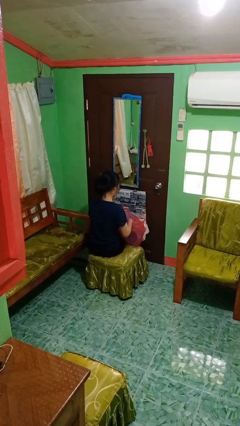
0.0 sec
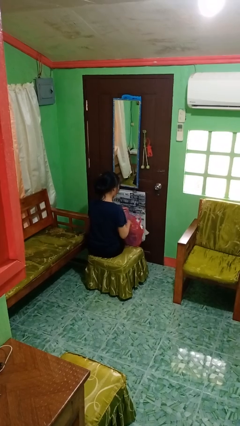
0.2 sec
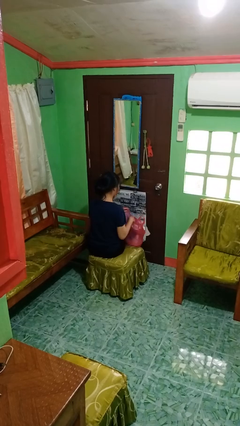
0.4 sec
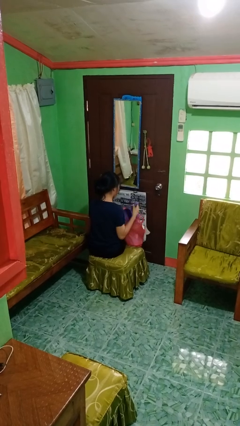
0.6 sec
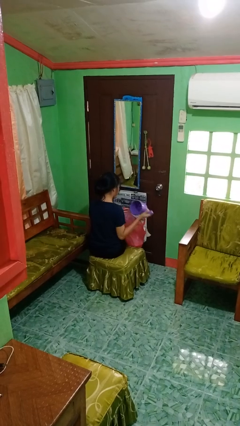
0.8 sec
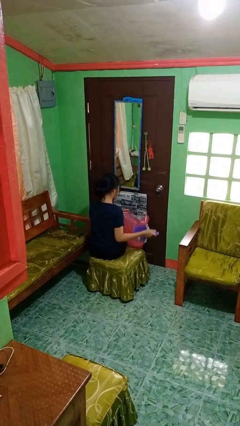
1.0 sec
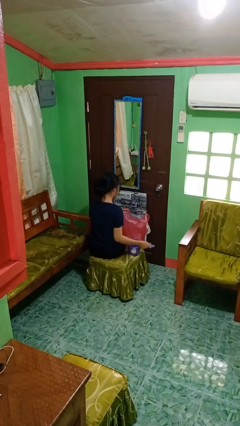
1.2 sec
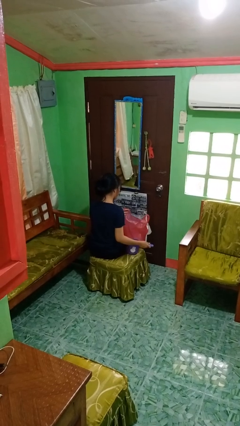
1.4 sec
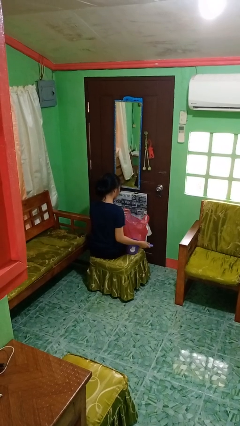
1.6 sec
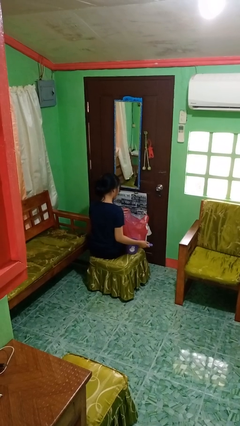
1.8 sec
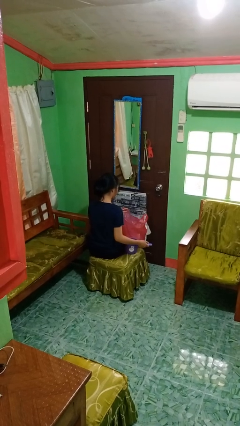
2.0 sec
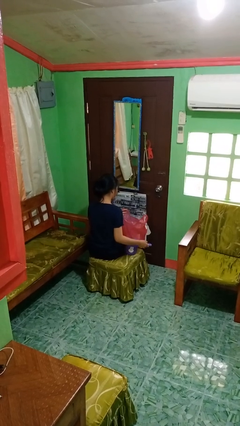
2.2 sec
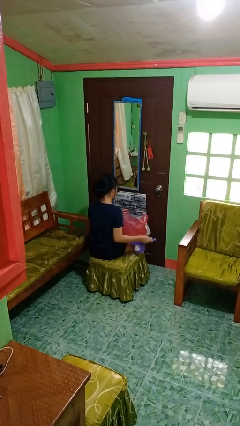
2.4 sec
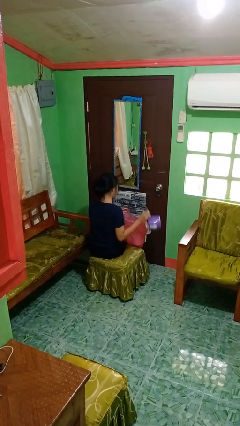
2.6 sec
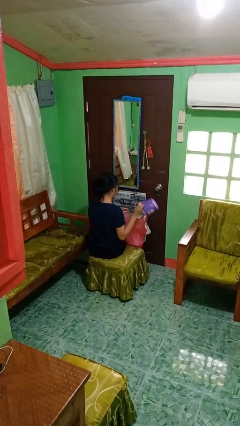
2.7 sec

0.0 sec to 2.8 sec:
person takes object from bag

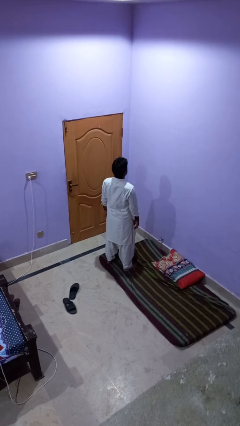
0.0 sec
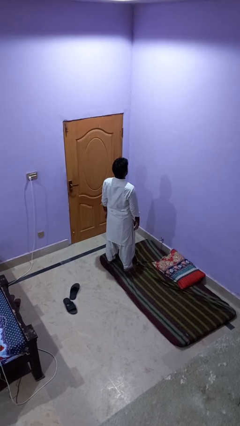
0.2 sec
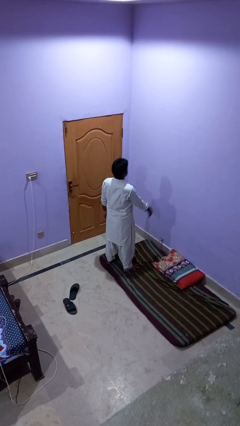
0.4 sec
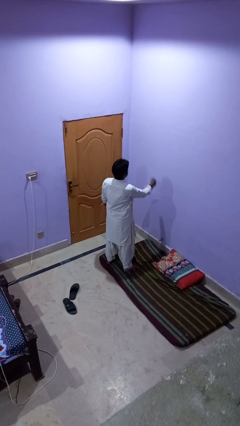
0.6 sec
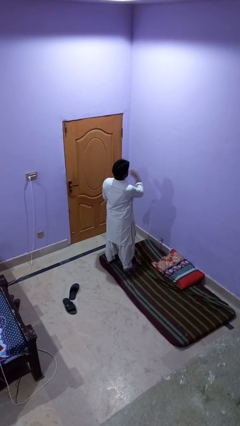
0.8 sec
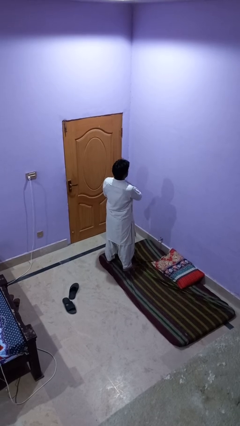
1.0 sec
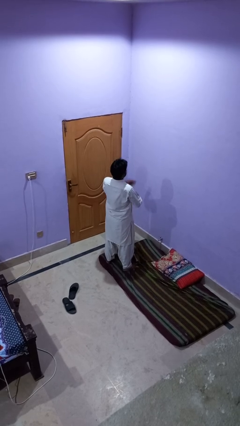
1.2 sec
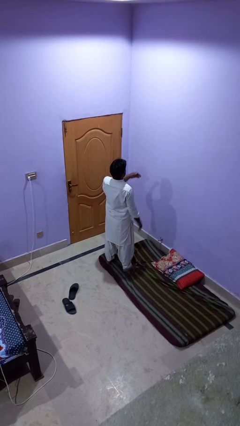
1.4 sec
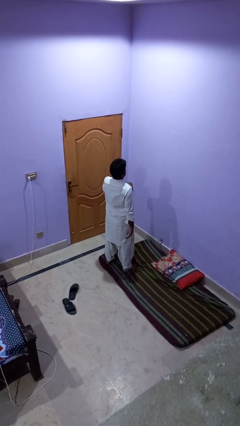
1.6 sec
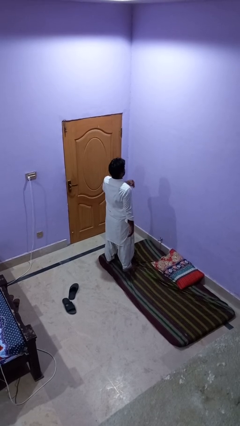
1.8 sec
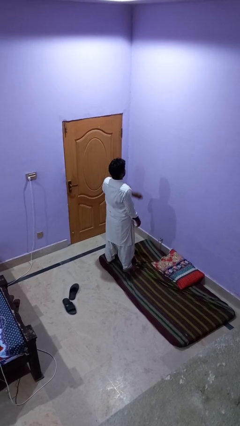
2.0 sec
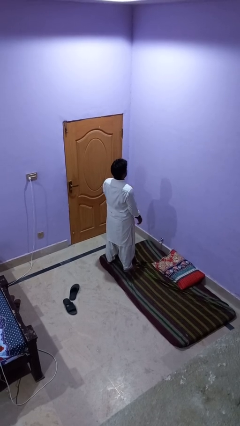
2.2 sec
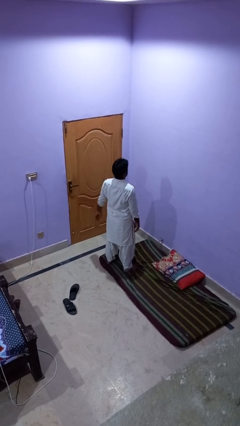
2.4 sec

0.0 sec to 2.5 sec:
person drums on chest

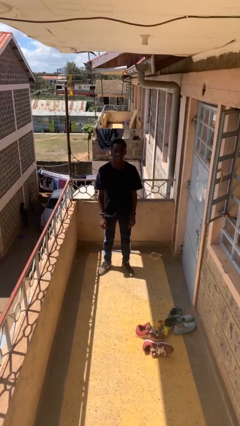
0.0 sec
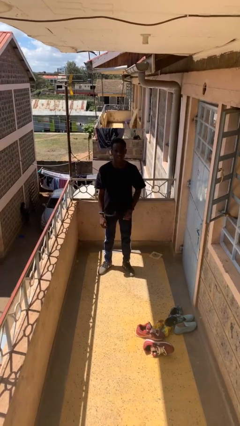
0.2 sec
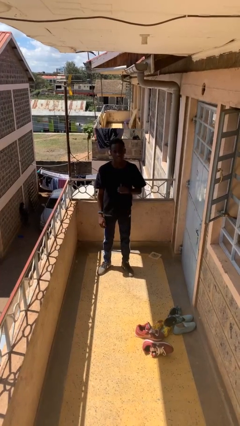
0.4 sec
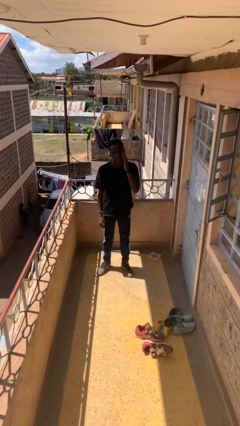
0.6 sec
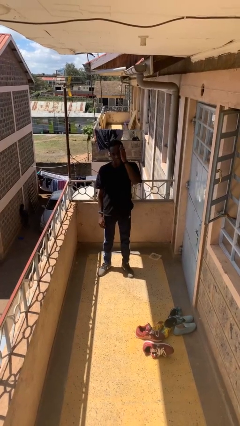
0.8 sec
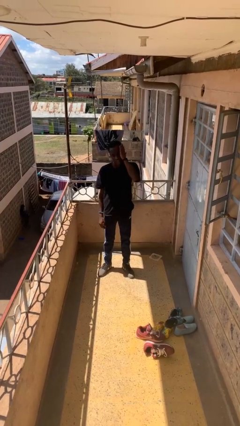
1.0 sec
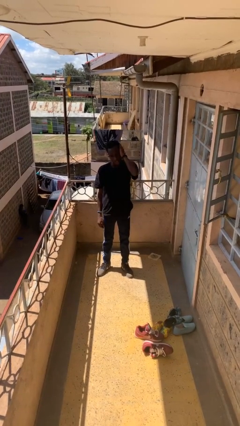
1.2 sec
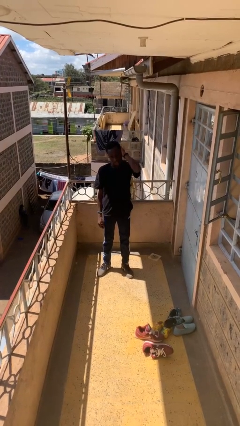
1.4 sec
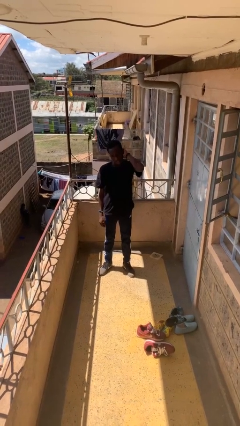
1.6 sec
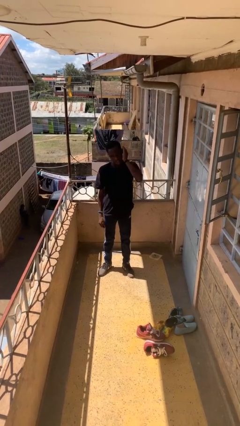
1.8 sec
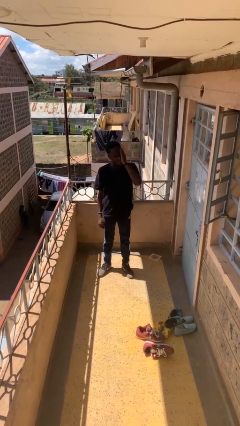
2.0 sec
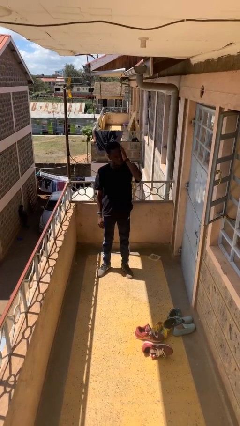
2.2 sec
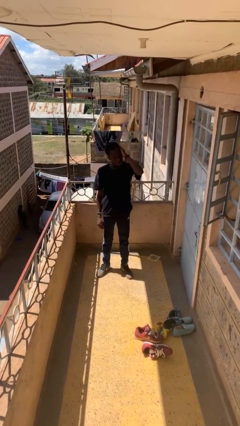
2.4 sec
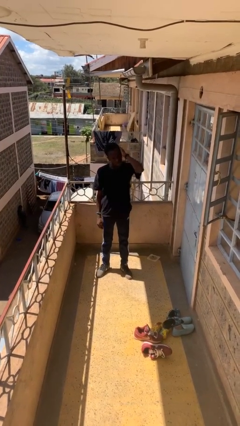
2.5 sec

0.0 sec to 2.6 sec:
person strokes hair

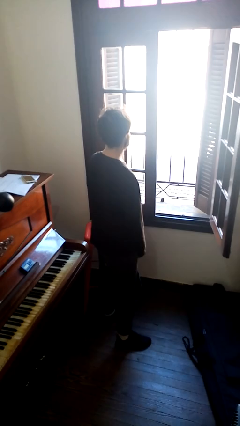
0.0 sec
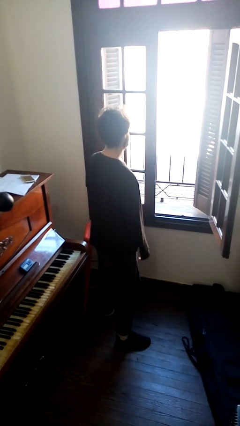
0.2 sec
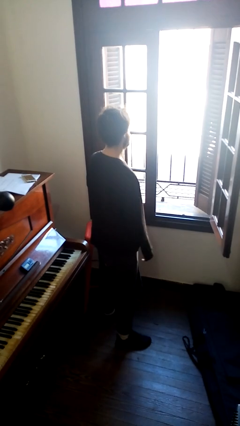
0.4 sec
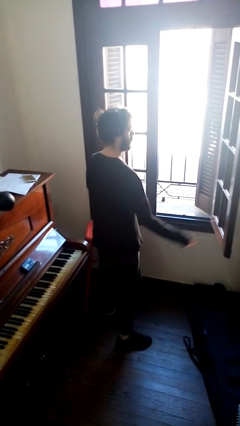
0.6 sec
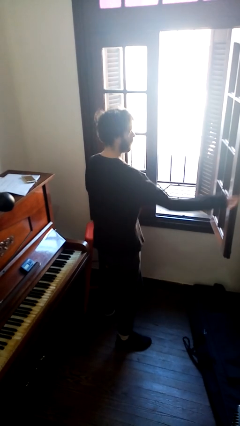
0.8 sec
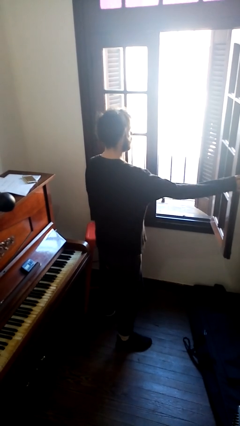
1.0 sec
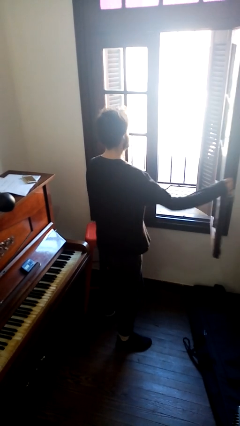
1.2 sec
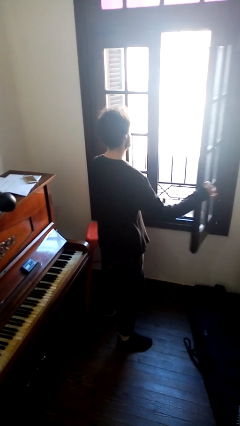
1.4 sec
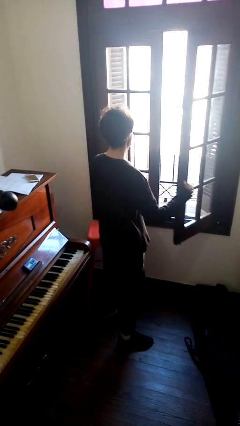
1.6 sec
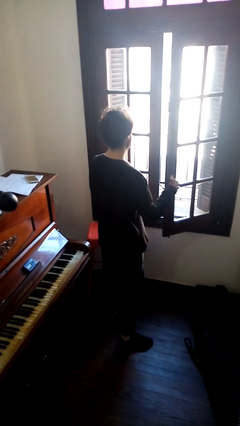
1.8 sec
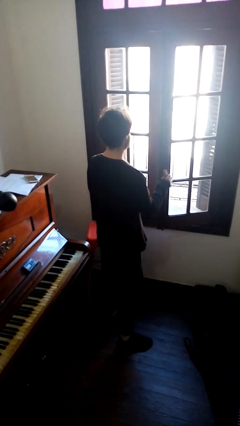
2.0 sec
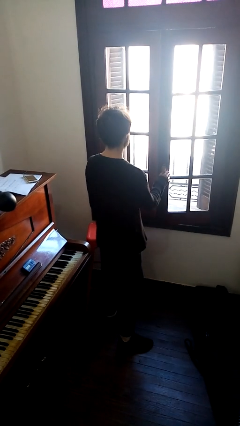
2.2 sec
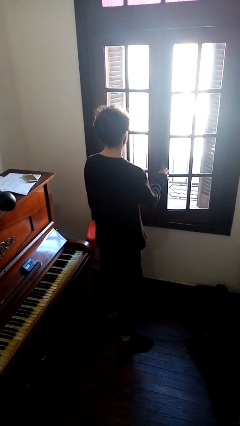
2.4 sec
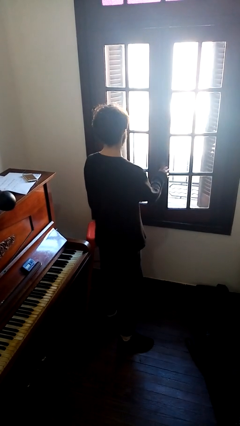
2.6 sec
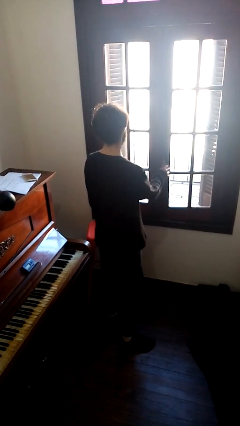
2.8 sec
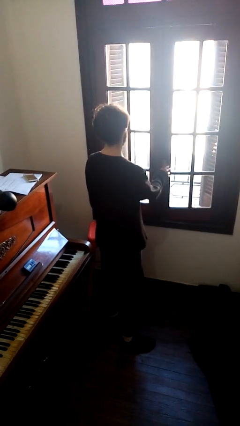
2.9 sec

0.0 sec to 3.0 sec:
person closes home window

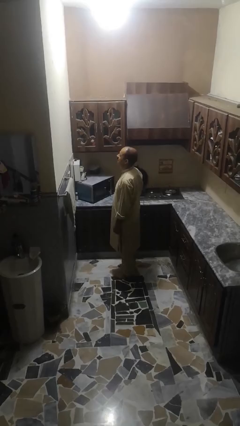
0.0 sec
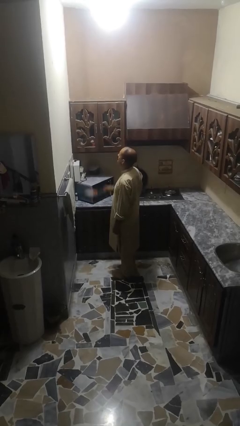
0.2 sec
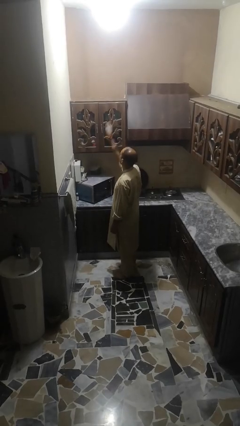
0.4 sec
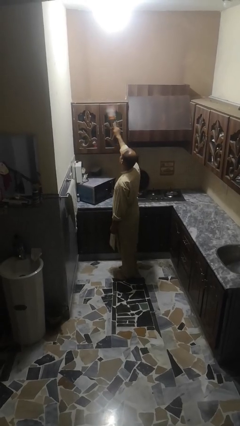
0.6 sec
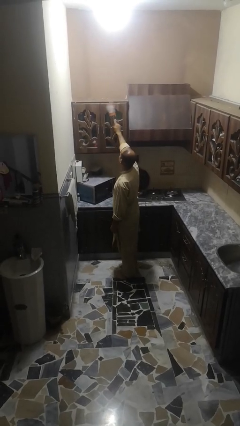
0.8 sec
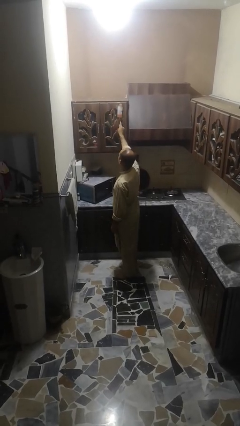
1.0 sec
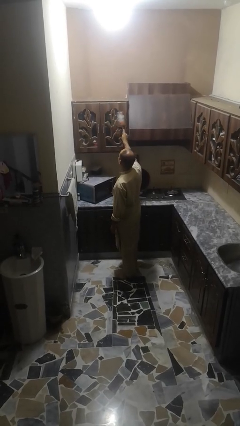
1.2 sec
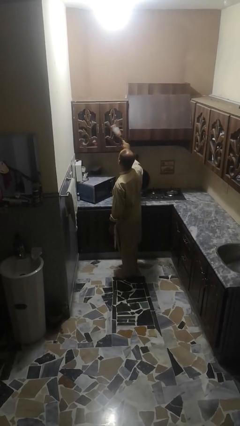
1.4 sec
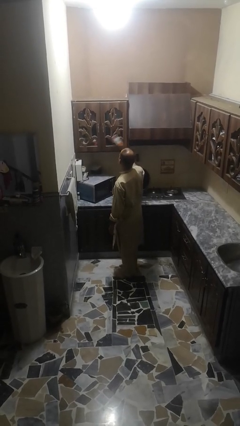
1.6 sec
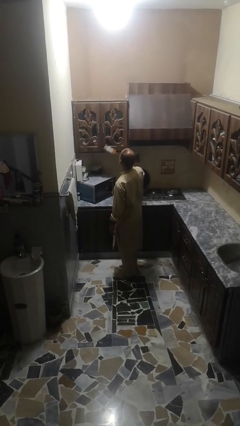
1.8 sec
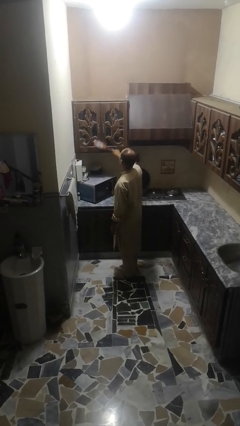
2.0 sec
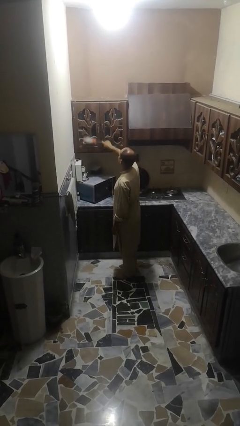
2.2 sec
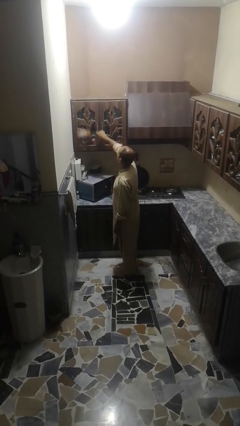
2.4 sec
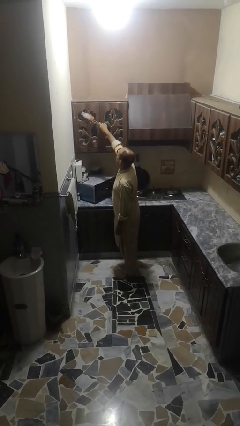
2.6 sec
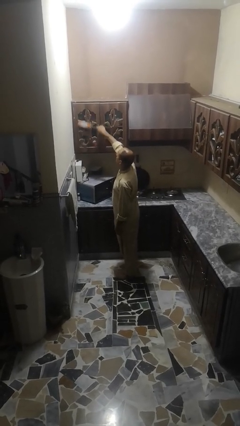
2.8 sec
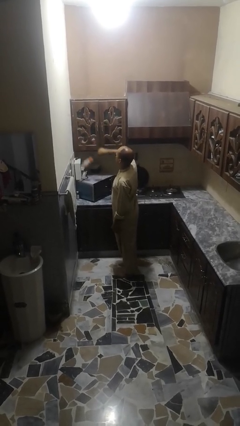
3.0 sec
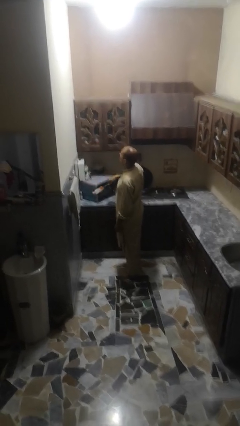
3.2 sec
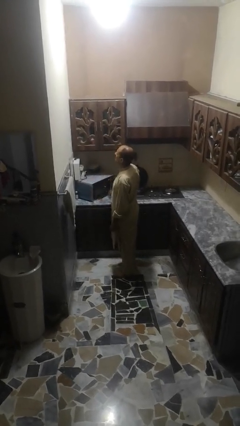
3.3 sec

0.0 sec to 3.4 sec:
person dusts furniture

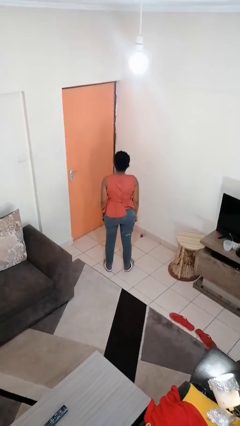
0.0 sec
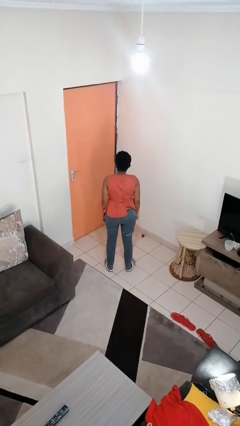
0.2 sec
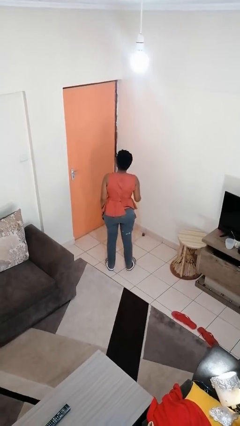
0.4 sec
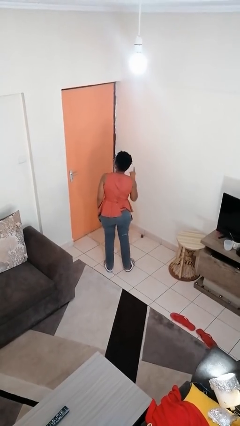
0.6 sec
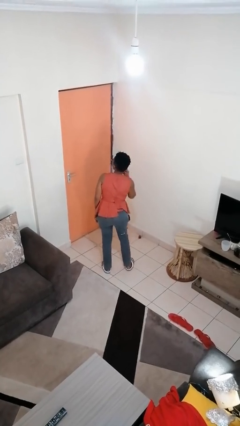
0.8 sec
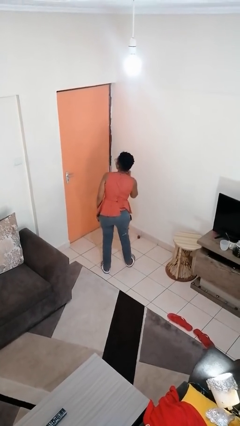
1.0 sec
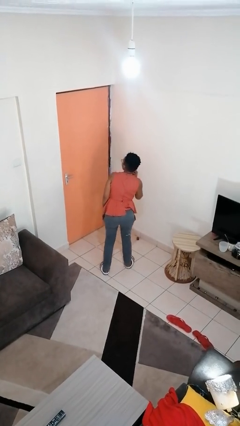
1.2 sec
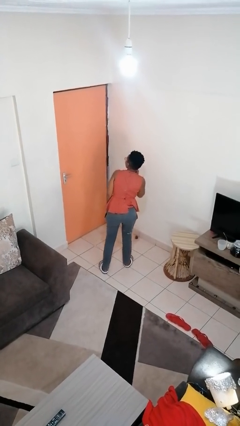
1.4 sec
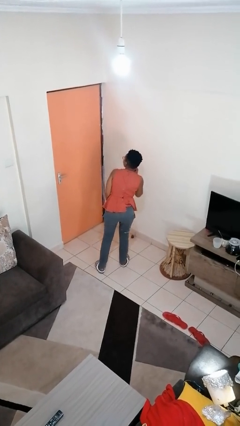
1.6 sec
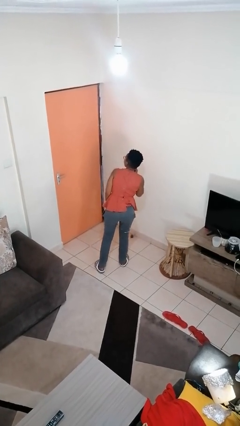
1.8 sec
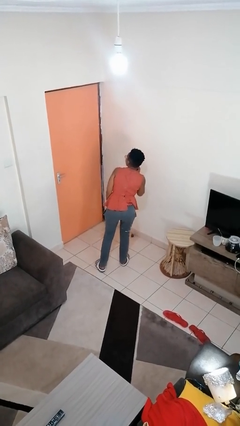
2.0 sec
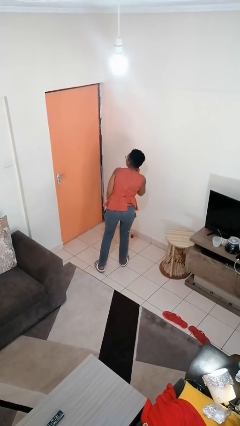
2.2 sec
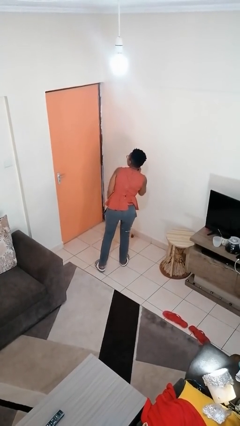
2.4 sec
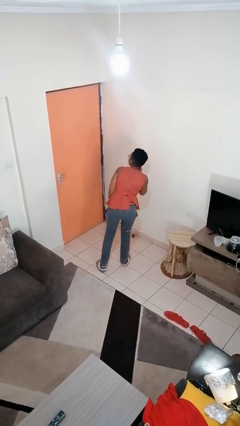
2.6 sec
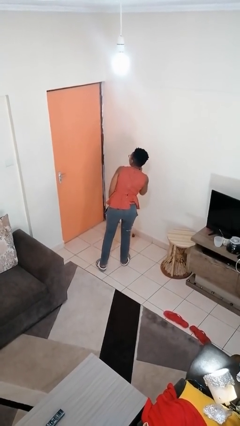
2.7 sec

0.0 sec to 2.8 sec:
person gestures listen closely

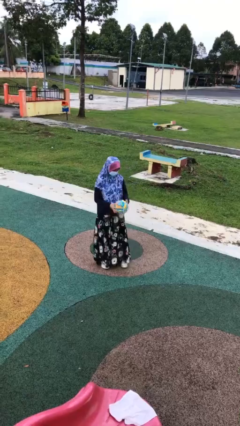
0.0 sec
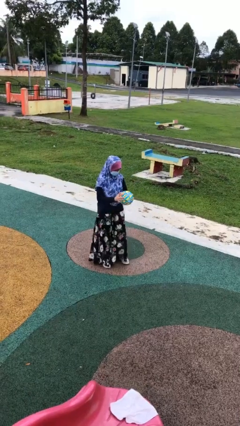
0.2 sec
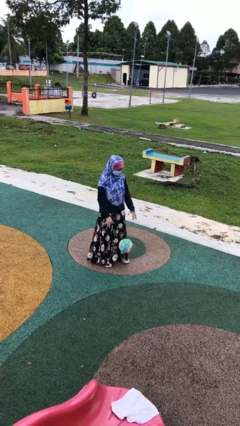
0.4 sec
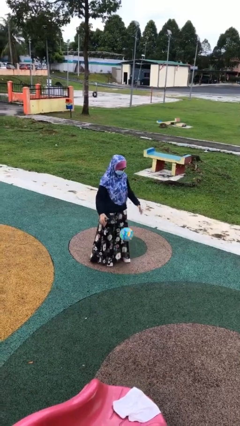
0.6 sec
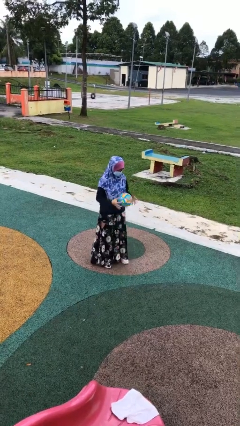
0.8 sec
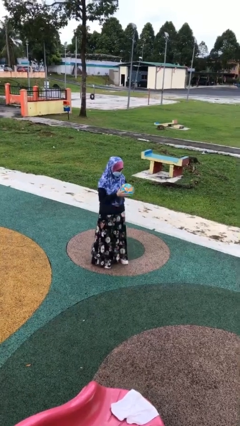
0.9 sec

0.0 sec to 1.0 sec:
person bounces ball on floor
